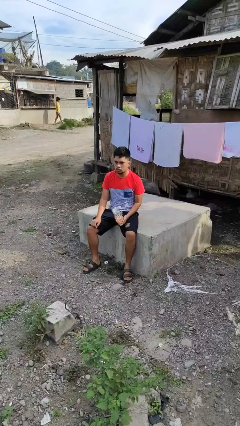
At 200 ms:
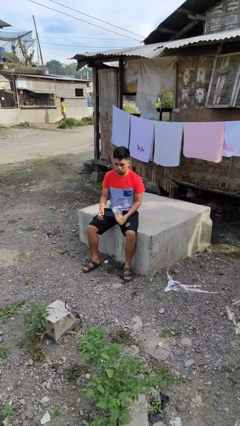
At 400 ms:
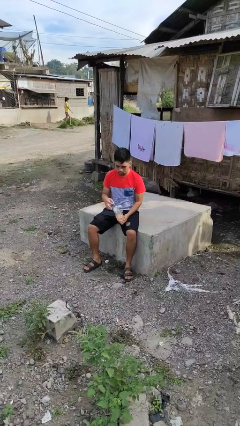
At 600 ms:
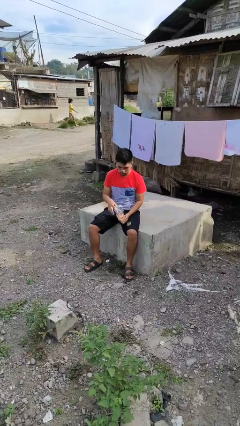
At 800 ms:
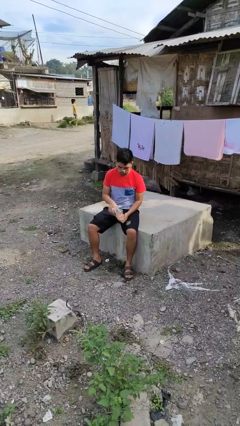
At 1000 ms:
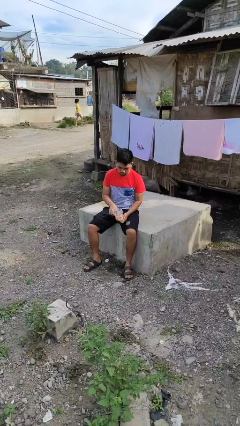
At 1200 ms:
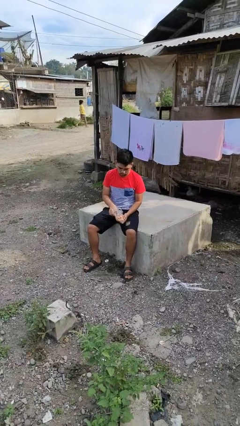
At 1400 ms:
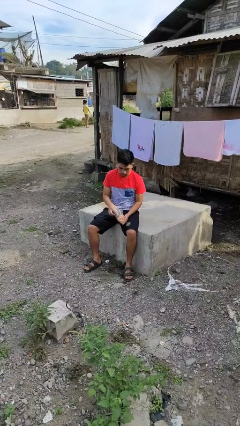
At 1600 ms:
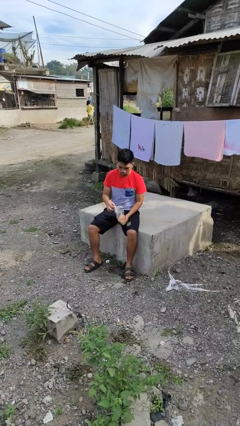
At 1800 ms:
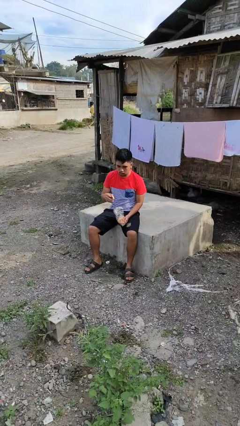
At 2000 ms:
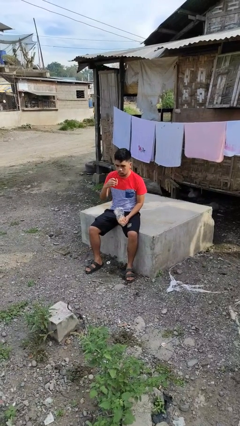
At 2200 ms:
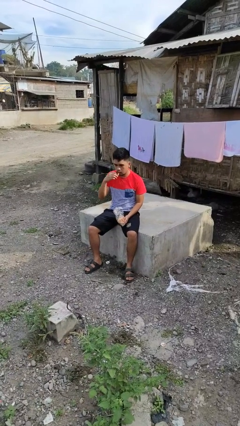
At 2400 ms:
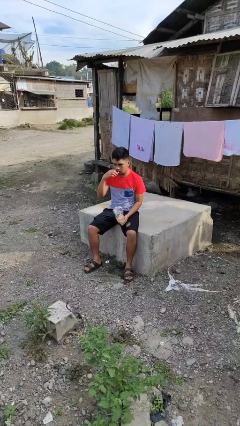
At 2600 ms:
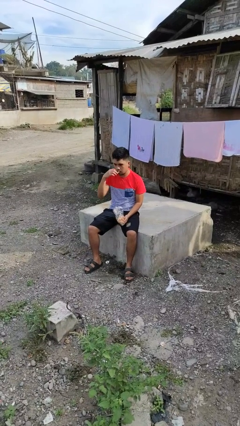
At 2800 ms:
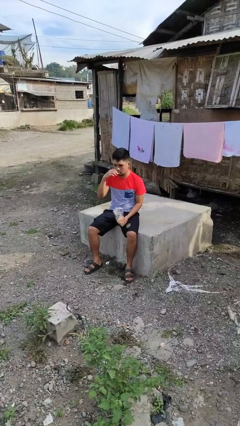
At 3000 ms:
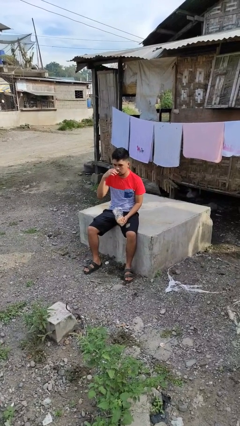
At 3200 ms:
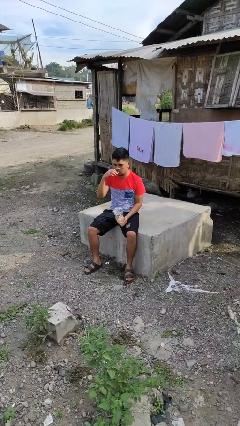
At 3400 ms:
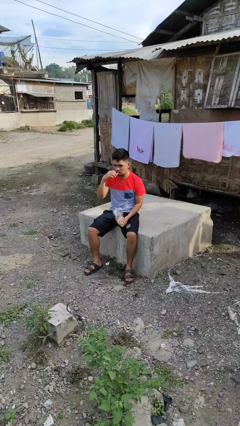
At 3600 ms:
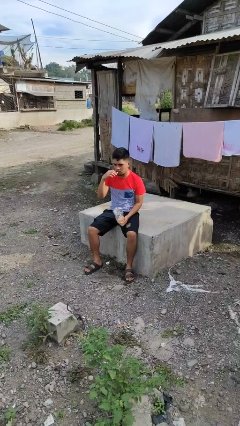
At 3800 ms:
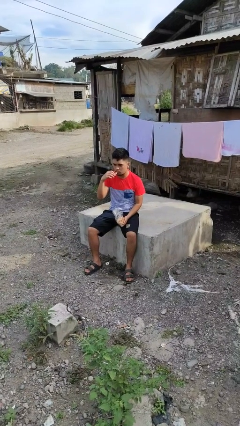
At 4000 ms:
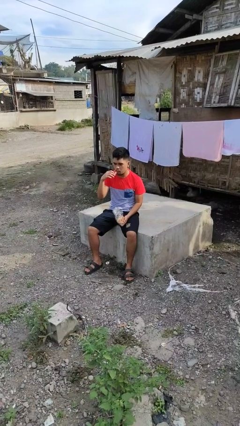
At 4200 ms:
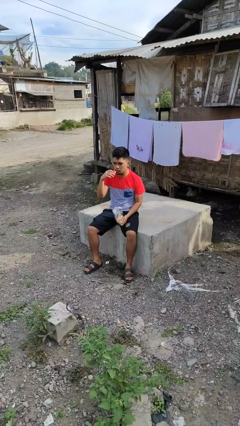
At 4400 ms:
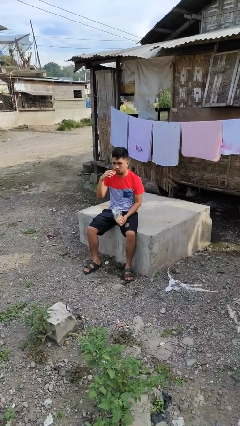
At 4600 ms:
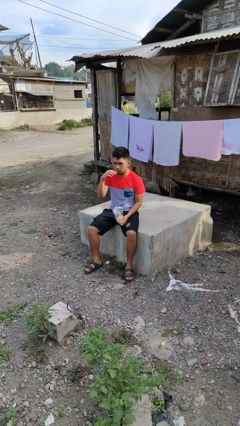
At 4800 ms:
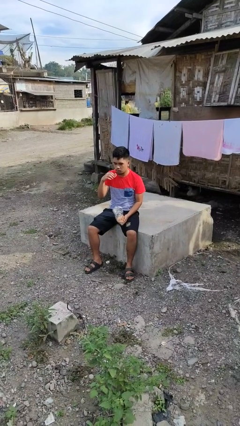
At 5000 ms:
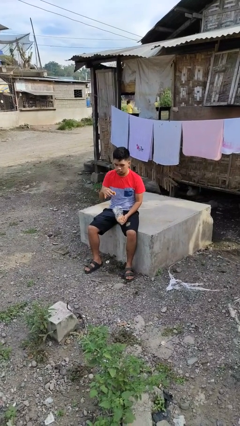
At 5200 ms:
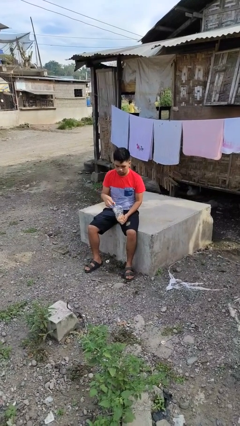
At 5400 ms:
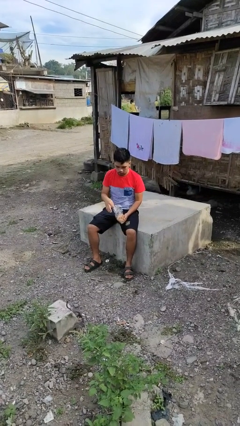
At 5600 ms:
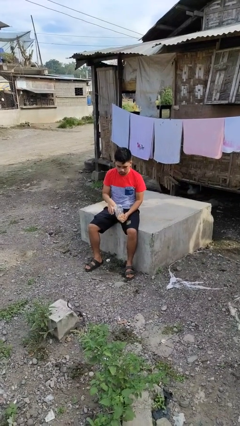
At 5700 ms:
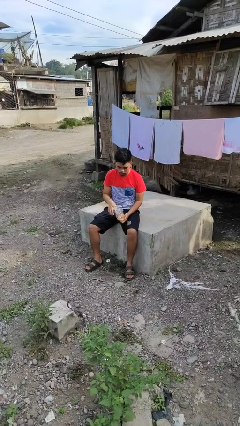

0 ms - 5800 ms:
person eats snack from bag

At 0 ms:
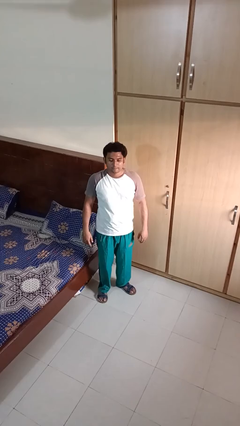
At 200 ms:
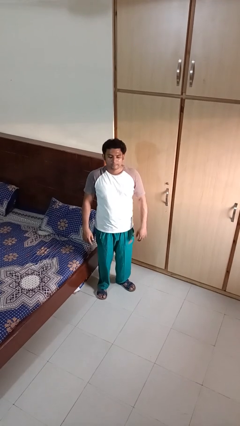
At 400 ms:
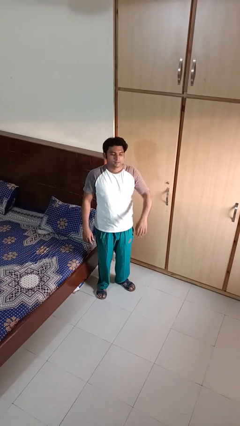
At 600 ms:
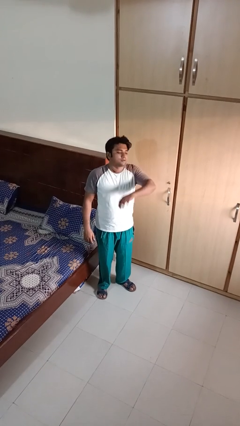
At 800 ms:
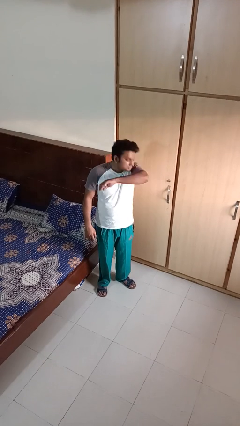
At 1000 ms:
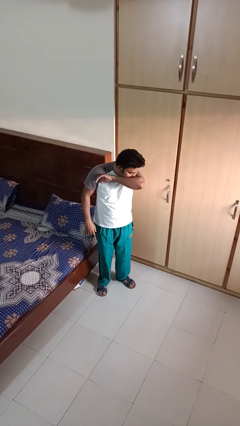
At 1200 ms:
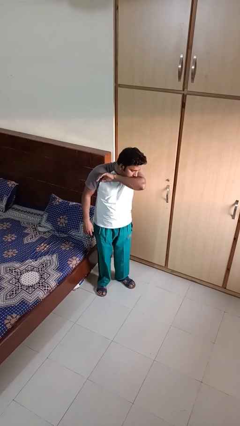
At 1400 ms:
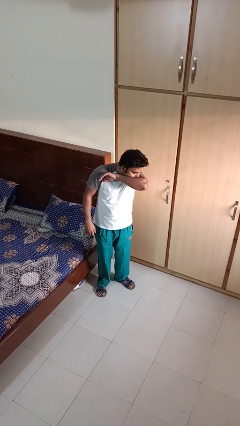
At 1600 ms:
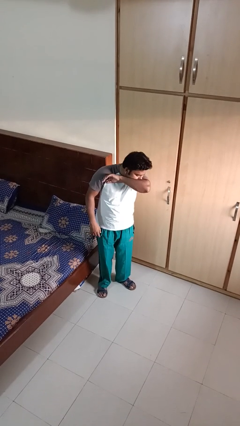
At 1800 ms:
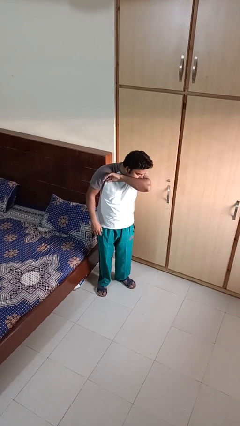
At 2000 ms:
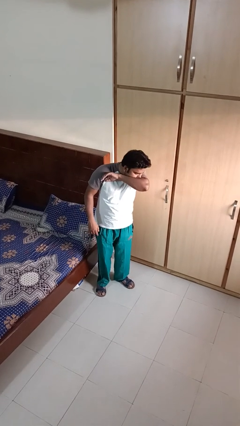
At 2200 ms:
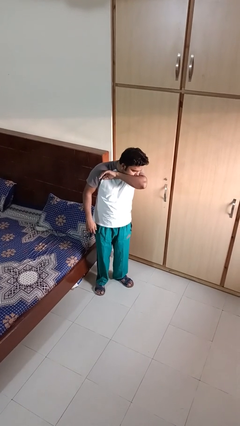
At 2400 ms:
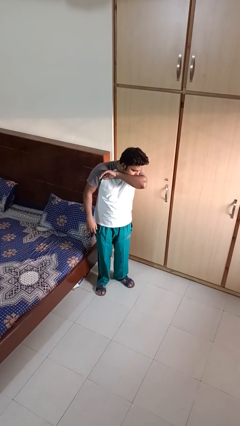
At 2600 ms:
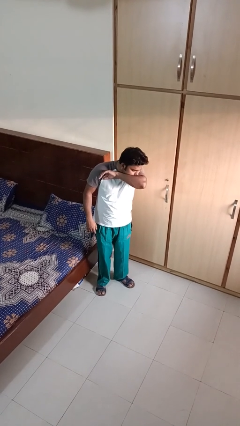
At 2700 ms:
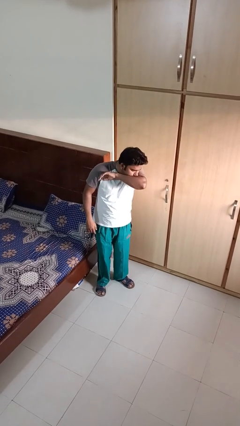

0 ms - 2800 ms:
person sneezes into arm

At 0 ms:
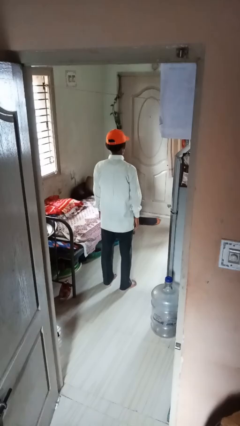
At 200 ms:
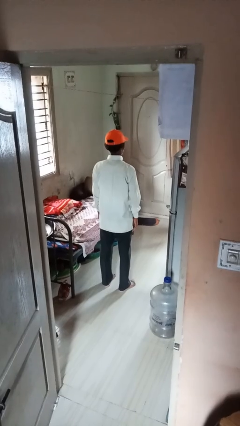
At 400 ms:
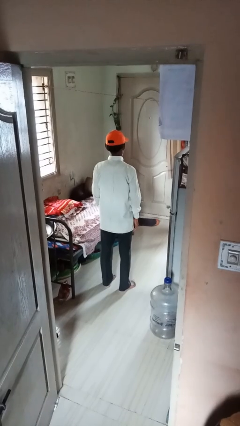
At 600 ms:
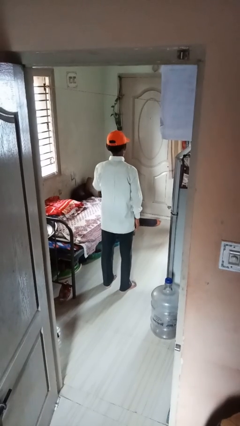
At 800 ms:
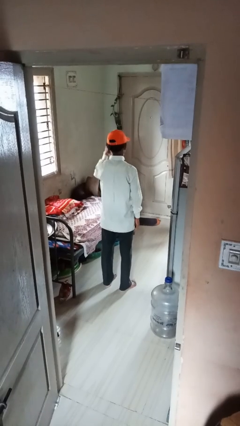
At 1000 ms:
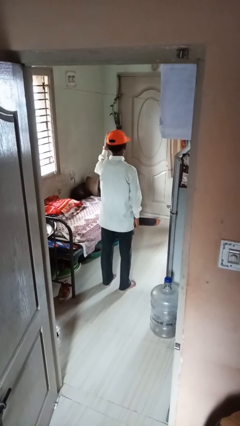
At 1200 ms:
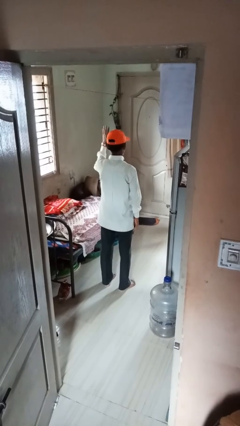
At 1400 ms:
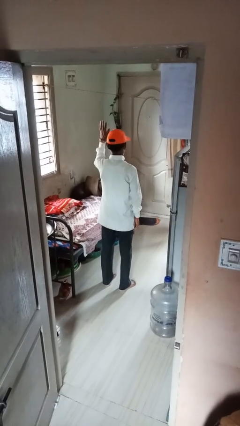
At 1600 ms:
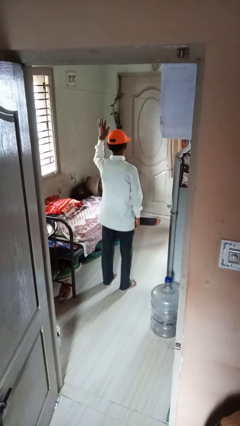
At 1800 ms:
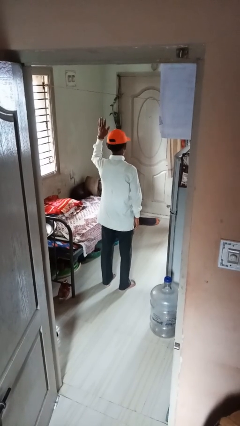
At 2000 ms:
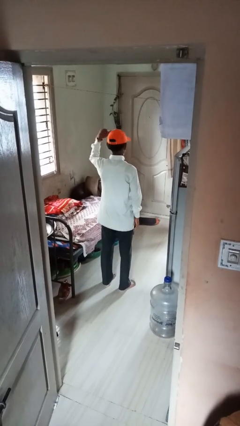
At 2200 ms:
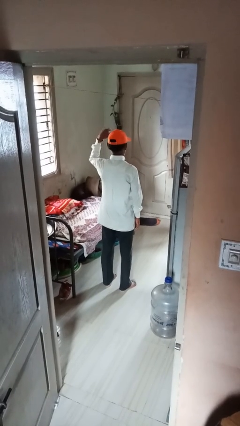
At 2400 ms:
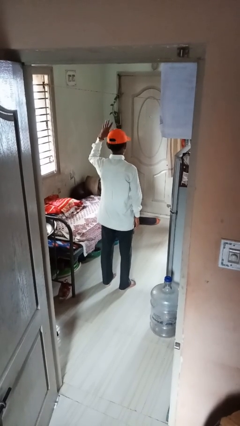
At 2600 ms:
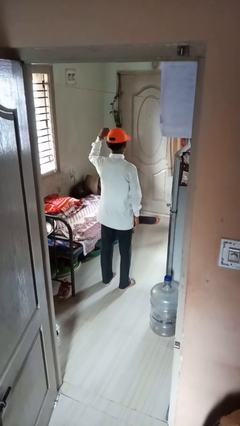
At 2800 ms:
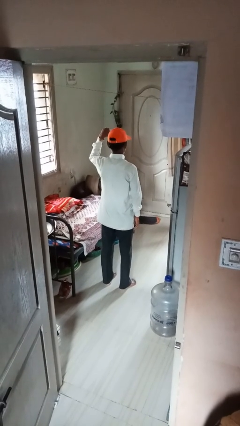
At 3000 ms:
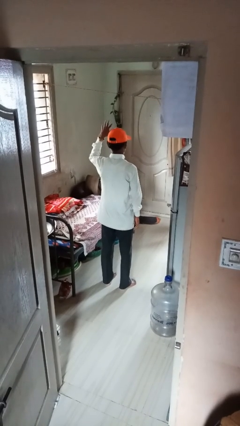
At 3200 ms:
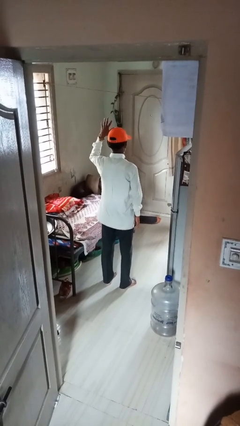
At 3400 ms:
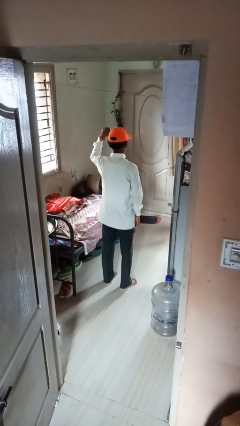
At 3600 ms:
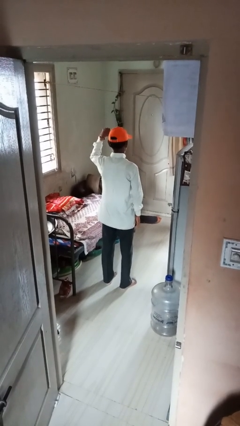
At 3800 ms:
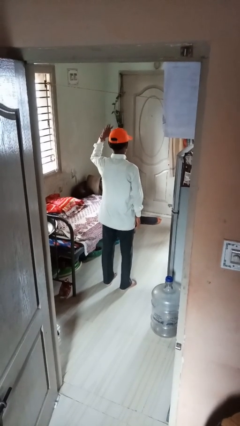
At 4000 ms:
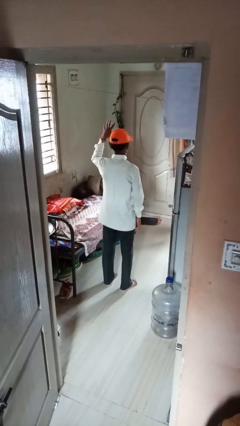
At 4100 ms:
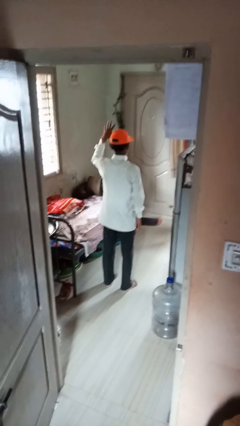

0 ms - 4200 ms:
person gestures come here

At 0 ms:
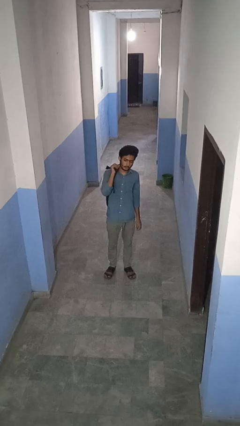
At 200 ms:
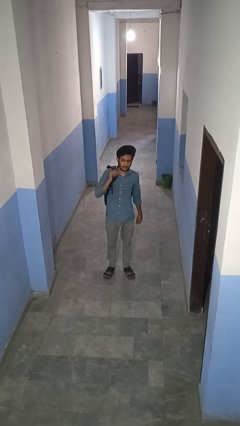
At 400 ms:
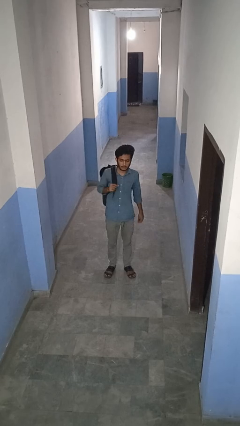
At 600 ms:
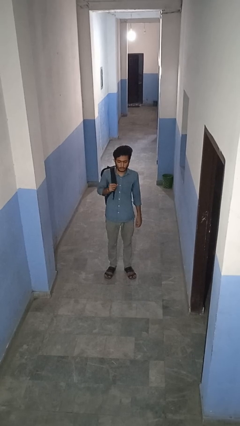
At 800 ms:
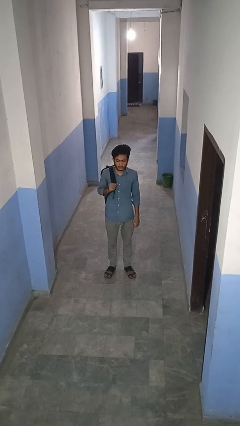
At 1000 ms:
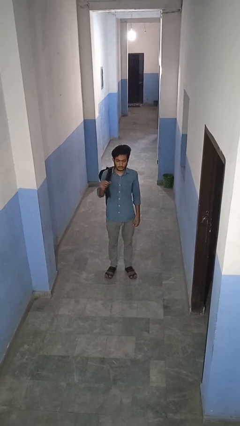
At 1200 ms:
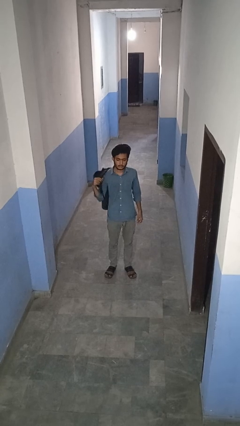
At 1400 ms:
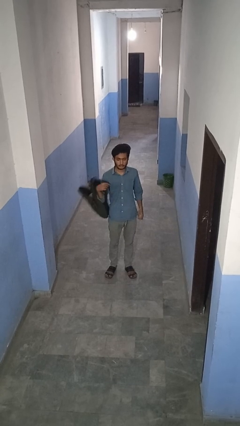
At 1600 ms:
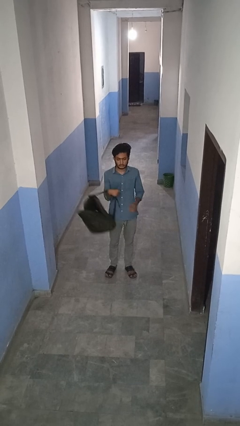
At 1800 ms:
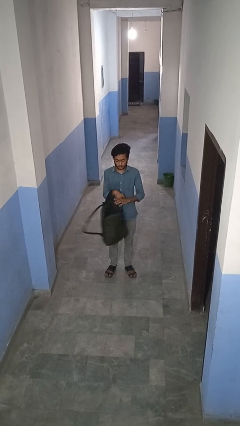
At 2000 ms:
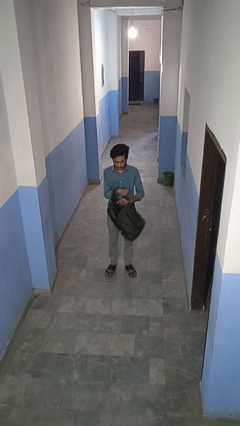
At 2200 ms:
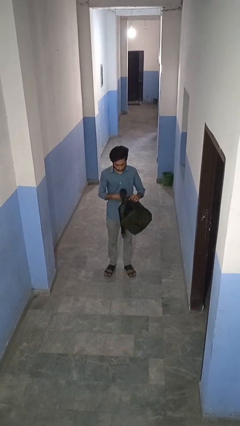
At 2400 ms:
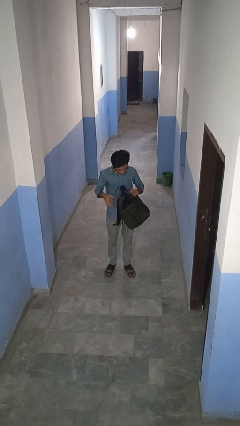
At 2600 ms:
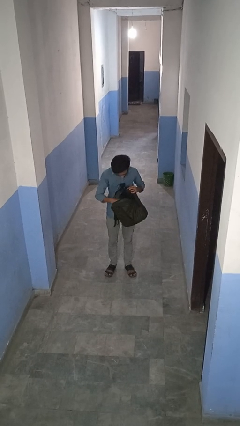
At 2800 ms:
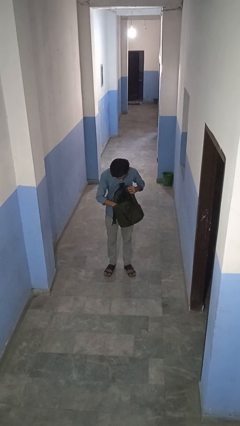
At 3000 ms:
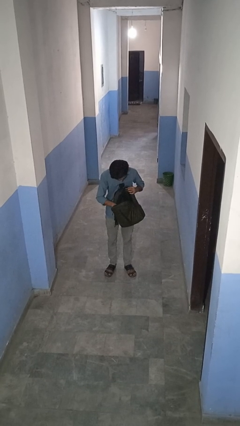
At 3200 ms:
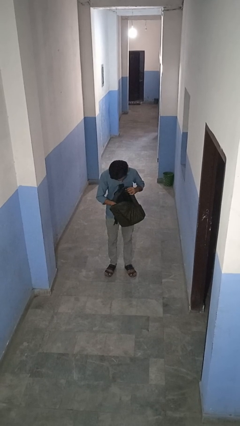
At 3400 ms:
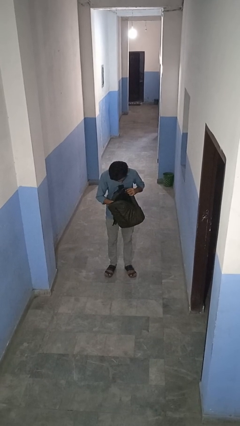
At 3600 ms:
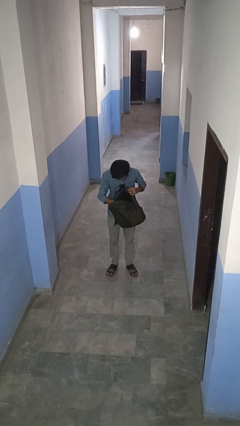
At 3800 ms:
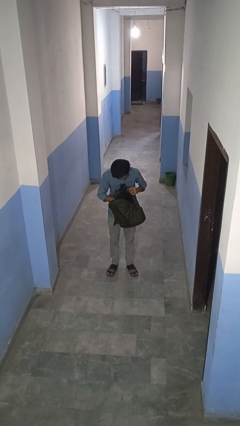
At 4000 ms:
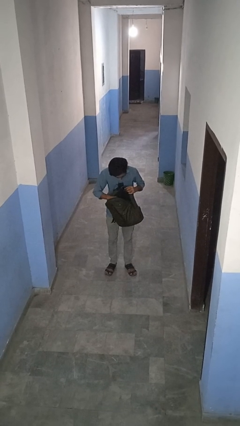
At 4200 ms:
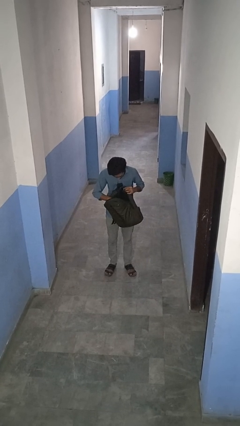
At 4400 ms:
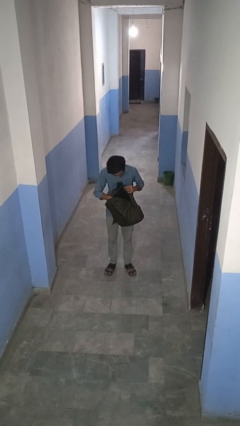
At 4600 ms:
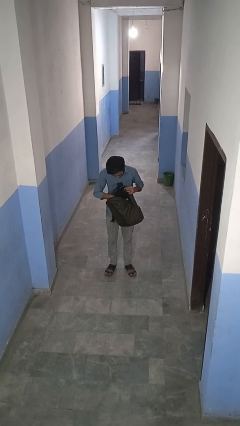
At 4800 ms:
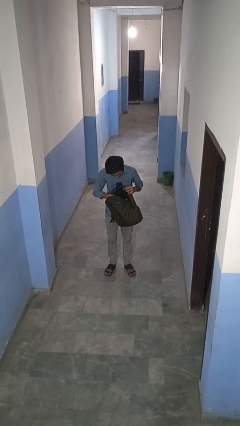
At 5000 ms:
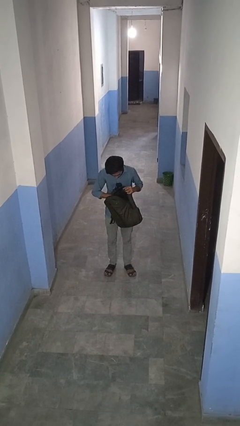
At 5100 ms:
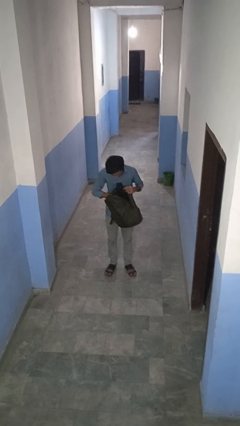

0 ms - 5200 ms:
person searches in backpack
